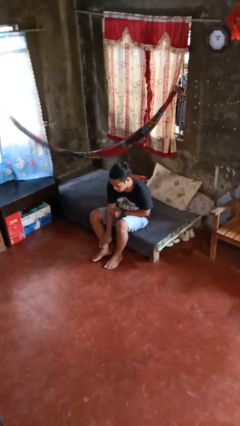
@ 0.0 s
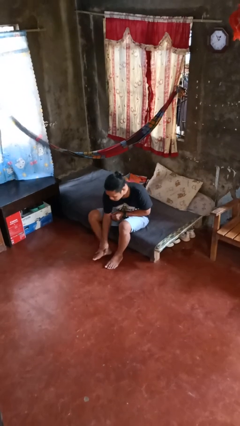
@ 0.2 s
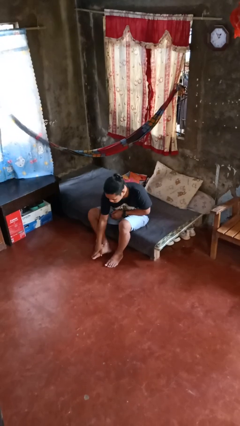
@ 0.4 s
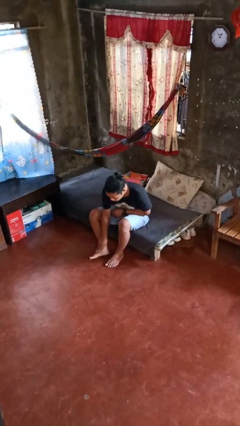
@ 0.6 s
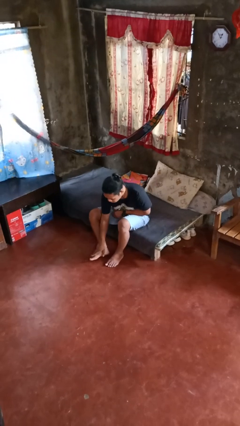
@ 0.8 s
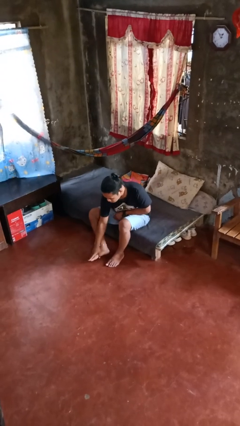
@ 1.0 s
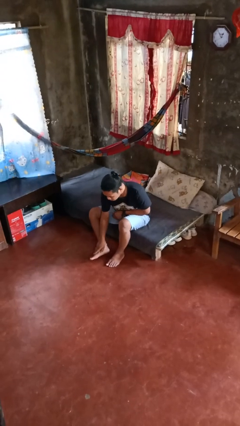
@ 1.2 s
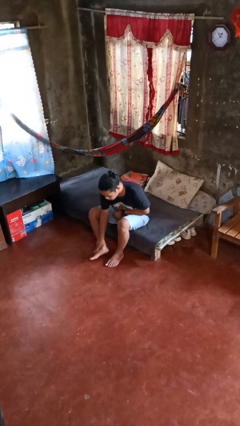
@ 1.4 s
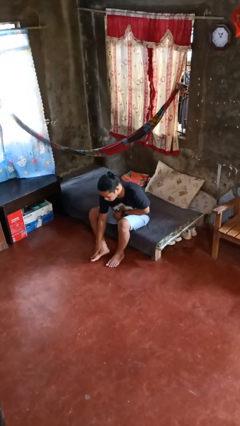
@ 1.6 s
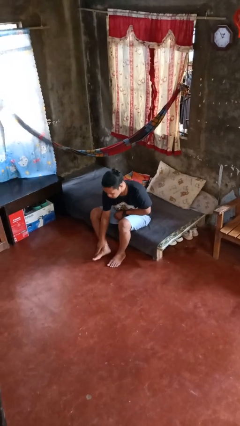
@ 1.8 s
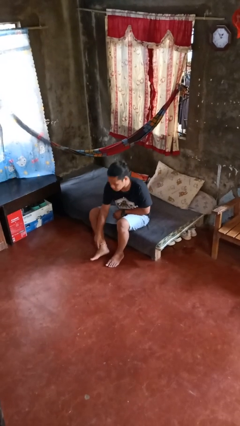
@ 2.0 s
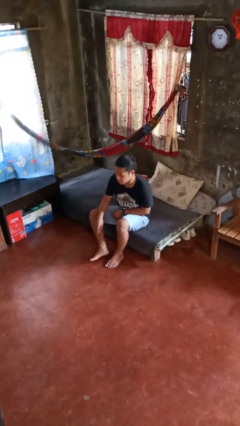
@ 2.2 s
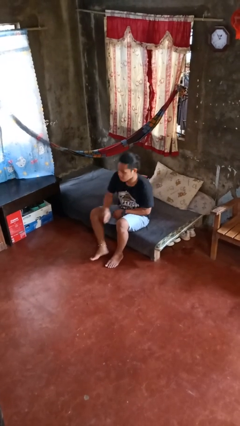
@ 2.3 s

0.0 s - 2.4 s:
person rubs foot

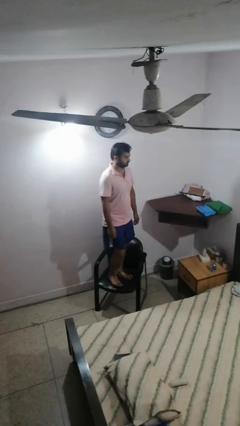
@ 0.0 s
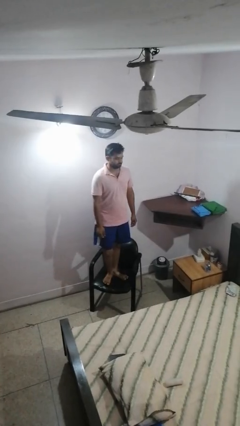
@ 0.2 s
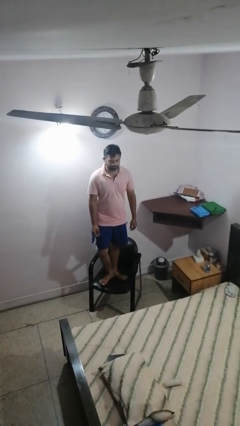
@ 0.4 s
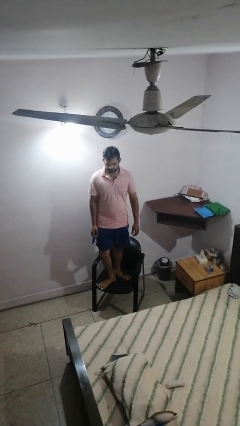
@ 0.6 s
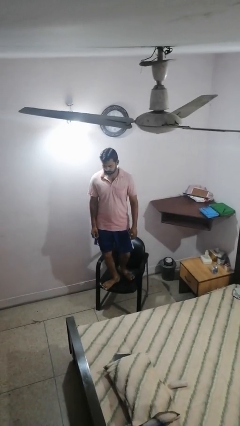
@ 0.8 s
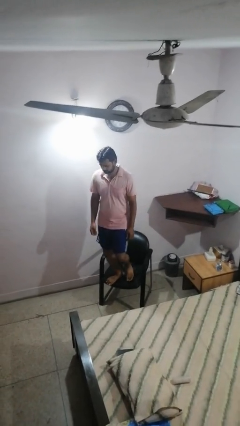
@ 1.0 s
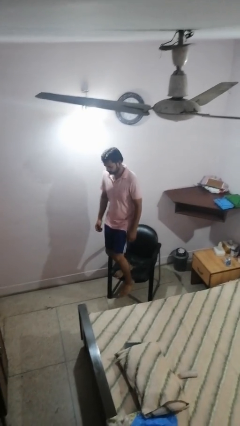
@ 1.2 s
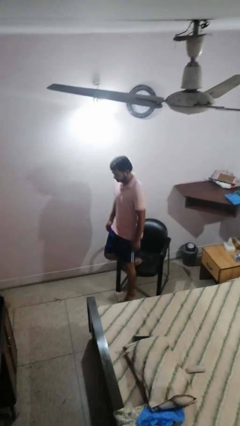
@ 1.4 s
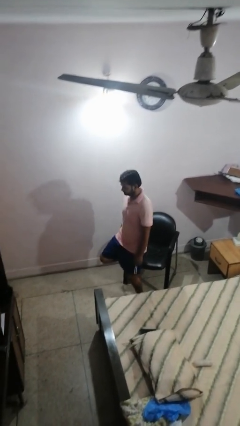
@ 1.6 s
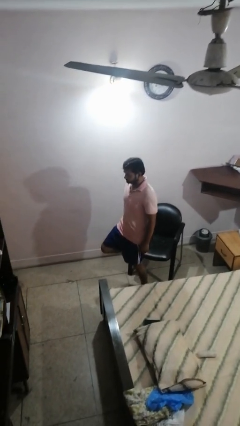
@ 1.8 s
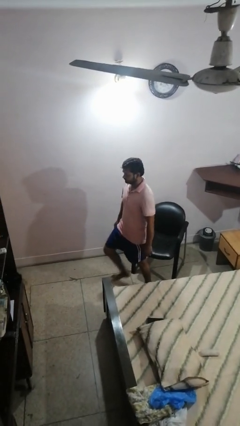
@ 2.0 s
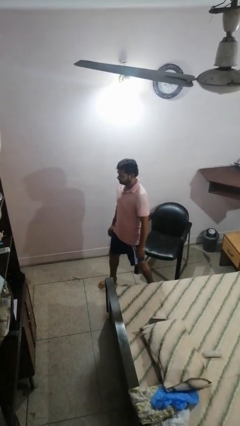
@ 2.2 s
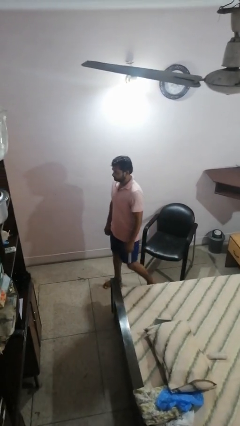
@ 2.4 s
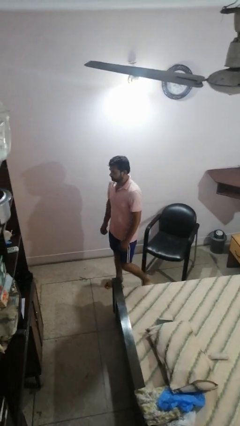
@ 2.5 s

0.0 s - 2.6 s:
person climbs off chair

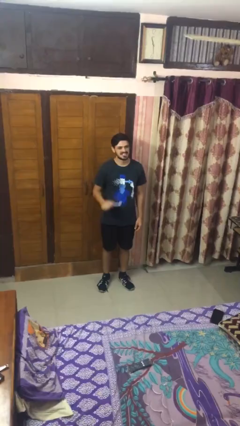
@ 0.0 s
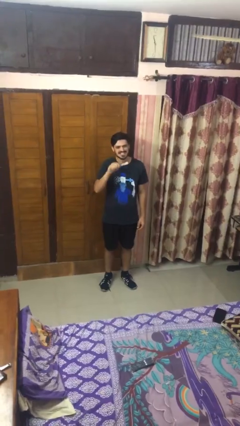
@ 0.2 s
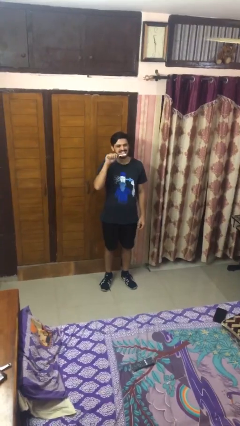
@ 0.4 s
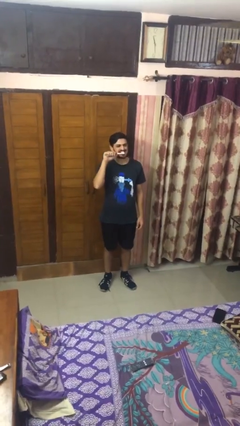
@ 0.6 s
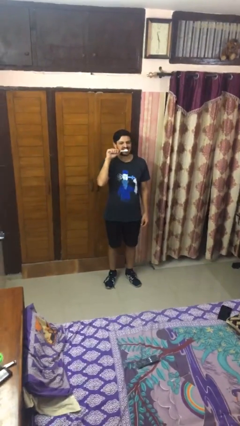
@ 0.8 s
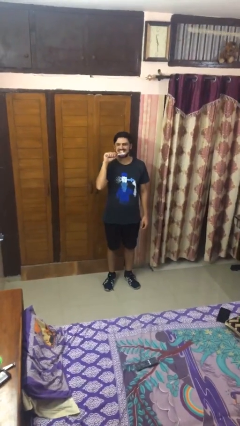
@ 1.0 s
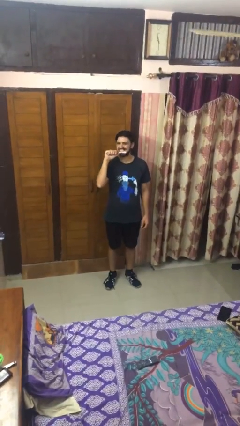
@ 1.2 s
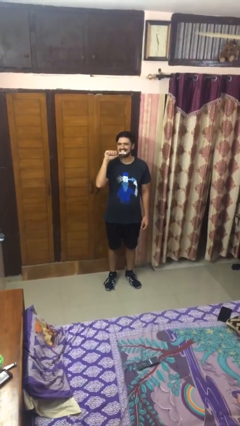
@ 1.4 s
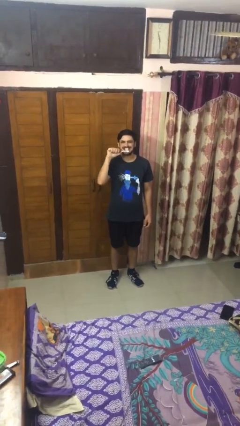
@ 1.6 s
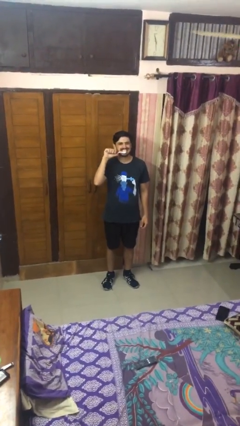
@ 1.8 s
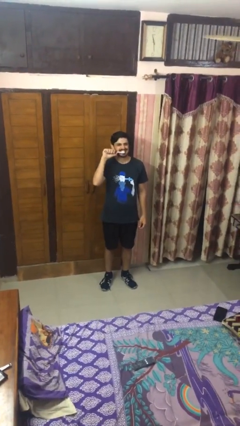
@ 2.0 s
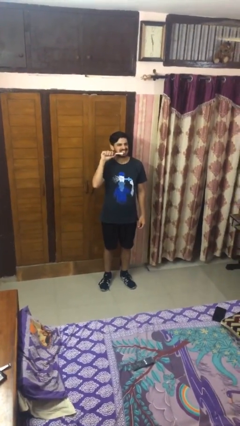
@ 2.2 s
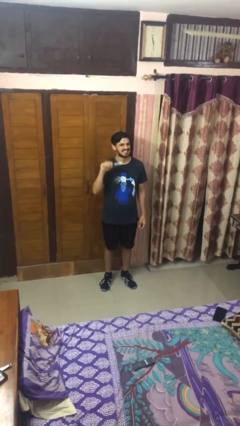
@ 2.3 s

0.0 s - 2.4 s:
person brushes teeth

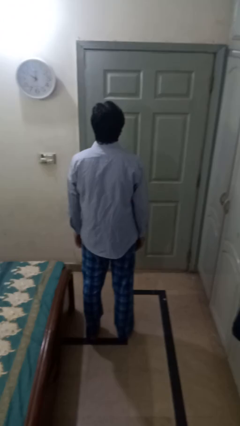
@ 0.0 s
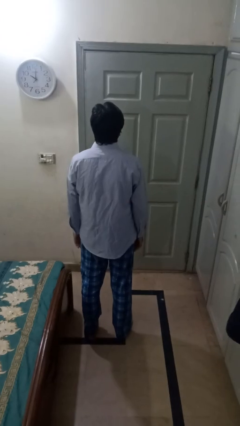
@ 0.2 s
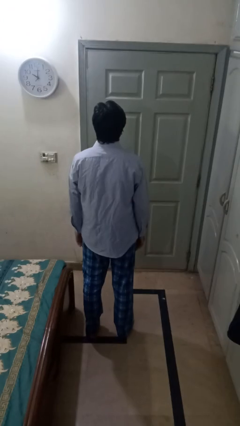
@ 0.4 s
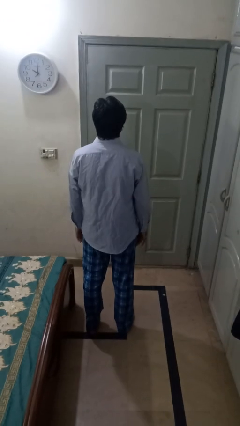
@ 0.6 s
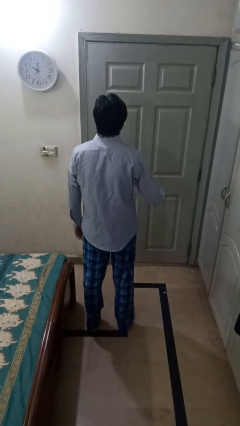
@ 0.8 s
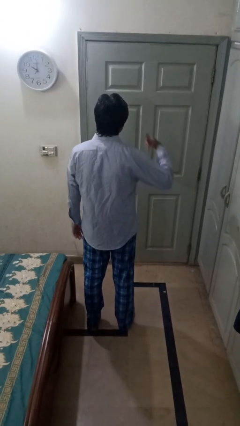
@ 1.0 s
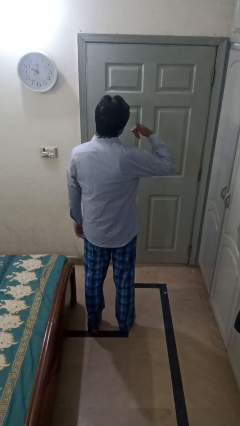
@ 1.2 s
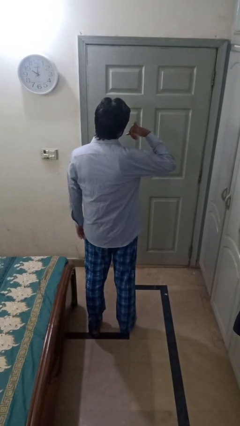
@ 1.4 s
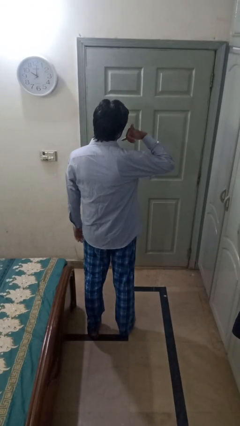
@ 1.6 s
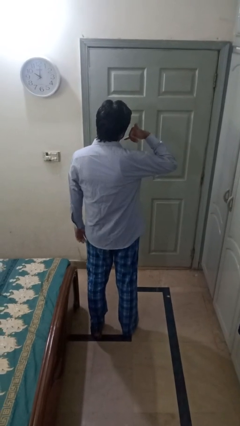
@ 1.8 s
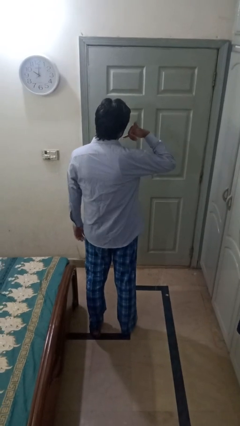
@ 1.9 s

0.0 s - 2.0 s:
person gestures call me

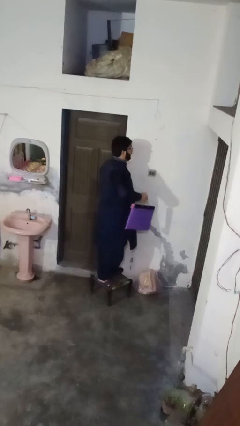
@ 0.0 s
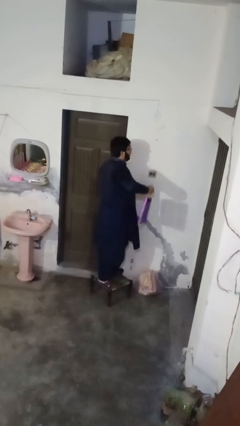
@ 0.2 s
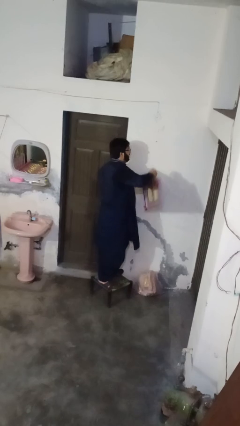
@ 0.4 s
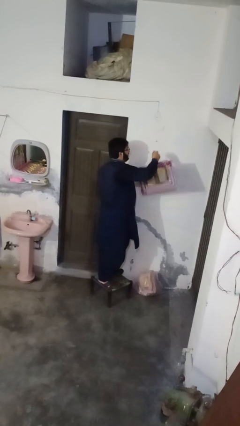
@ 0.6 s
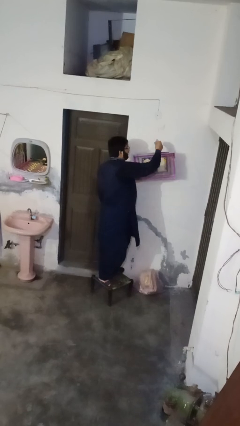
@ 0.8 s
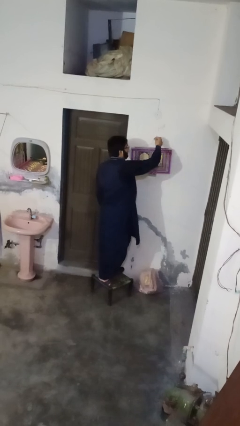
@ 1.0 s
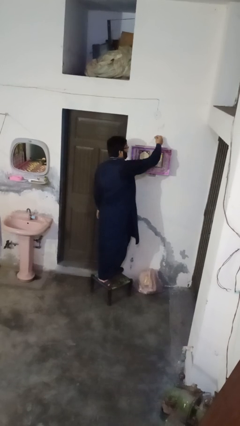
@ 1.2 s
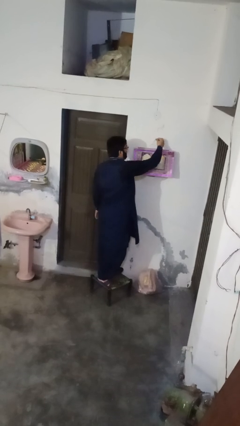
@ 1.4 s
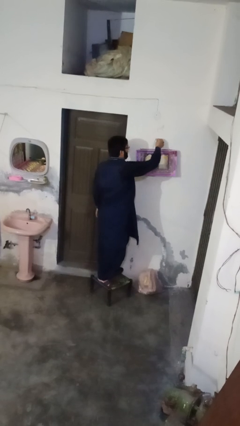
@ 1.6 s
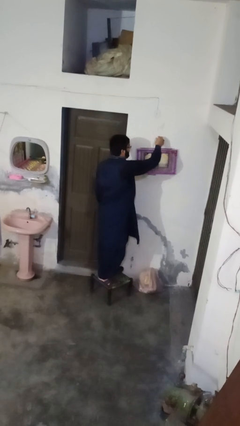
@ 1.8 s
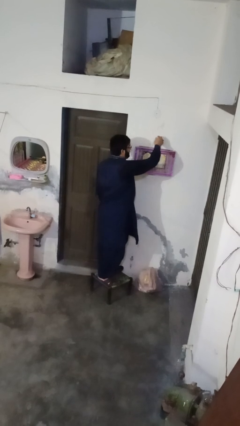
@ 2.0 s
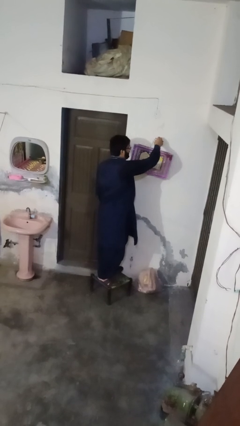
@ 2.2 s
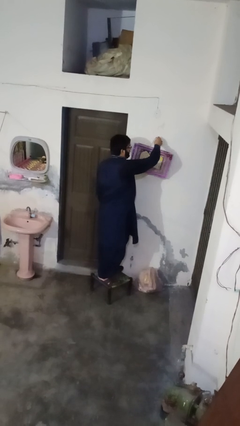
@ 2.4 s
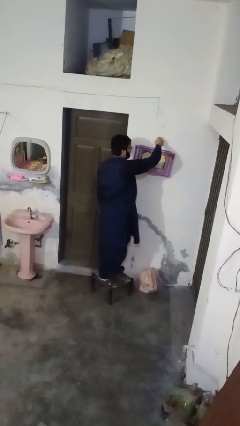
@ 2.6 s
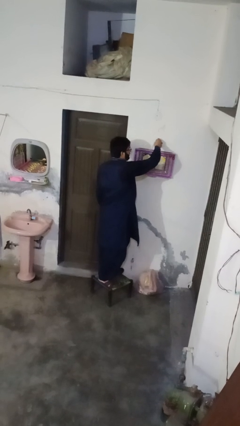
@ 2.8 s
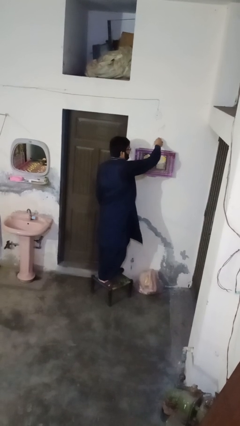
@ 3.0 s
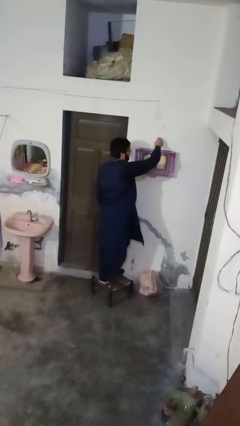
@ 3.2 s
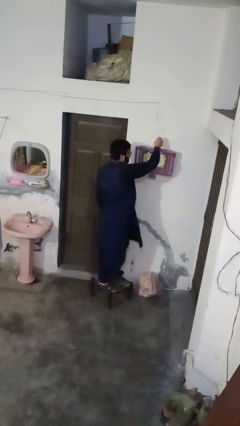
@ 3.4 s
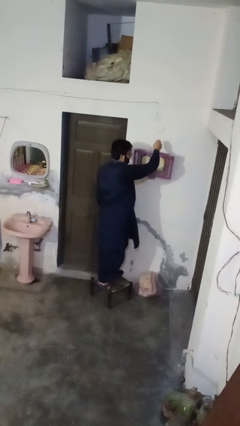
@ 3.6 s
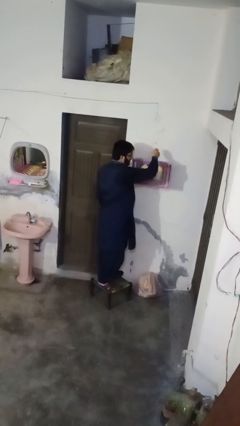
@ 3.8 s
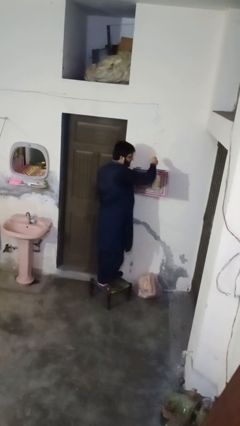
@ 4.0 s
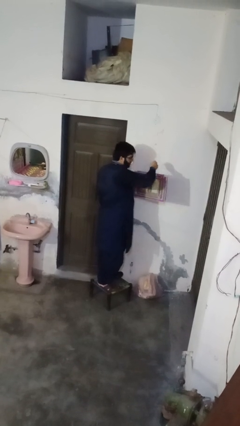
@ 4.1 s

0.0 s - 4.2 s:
person puts up picture frame

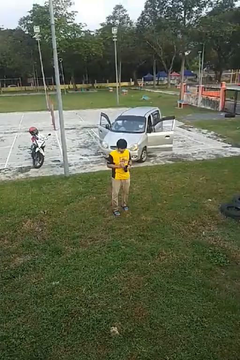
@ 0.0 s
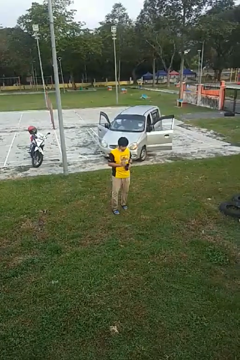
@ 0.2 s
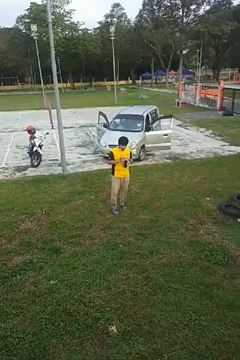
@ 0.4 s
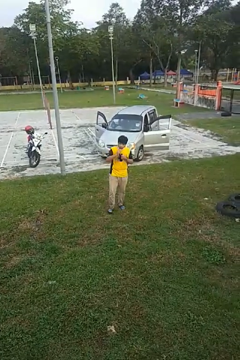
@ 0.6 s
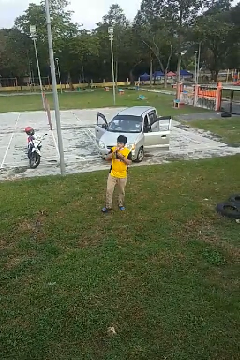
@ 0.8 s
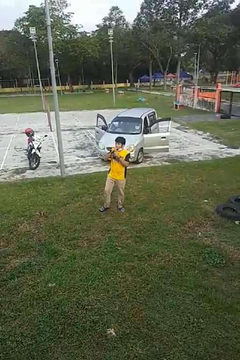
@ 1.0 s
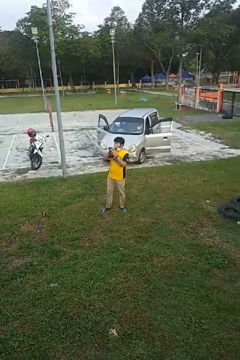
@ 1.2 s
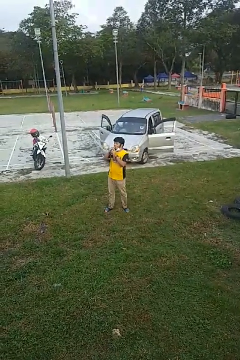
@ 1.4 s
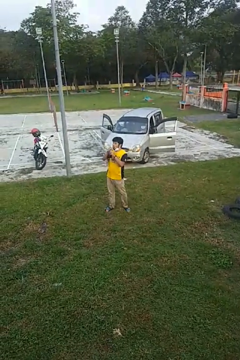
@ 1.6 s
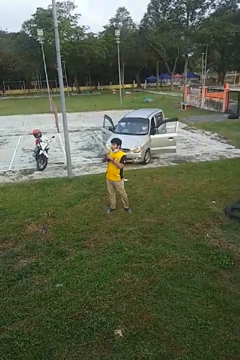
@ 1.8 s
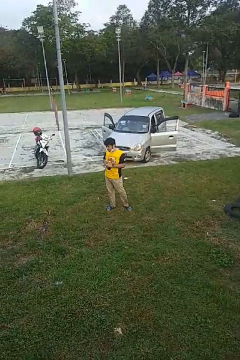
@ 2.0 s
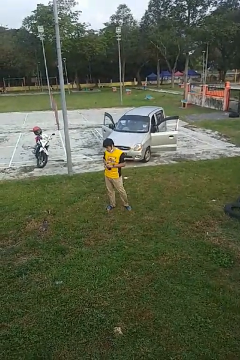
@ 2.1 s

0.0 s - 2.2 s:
person drinks from straw

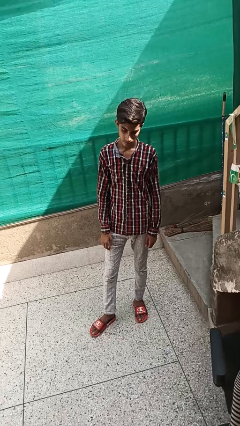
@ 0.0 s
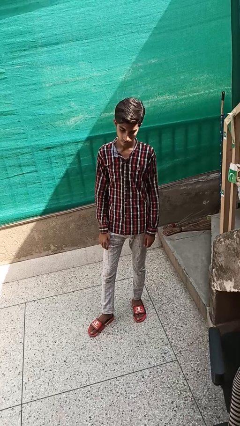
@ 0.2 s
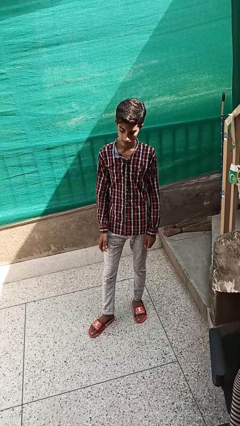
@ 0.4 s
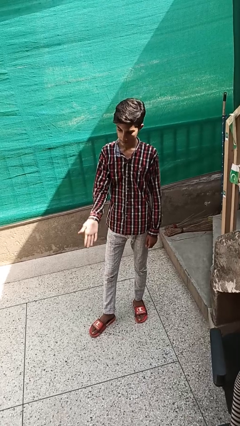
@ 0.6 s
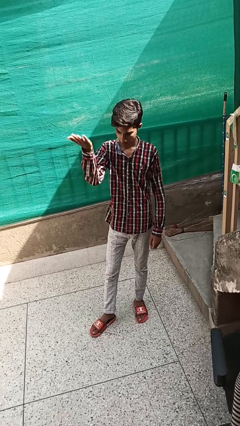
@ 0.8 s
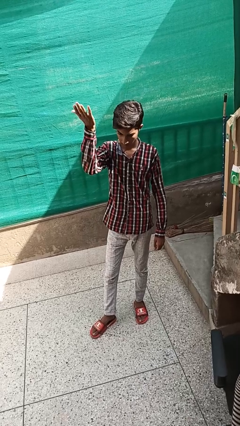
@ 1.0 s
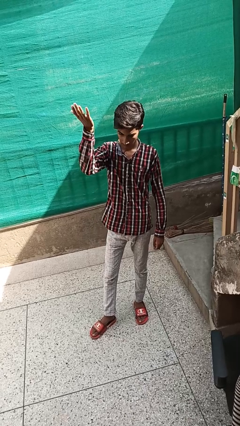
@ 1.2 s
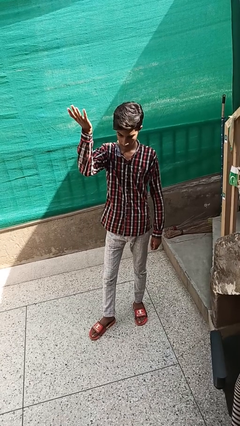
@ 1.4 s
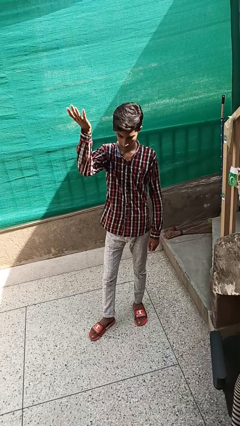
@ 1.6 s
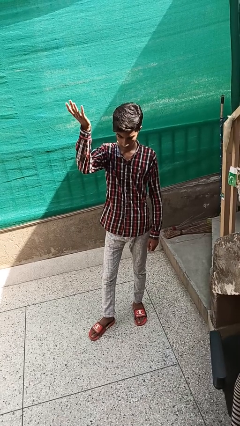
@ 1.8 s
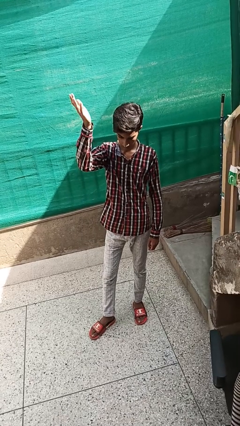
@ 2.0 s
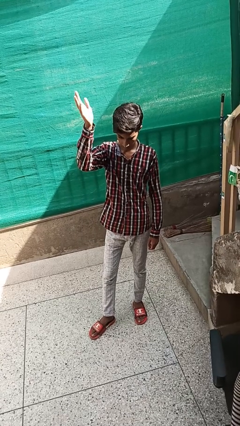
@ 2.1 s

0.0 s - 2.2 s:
person gestures swipe up
